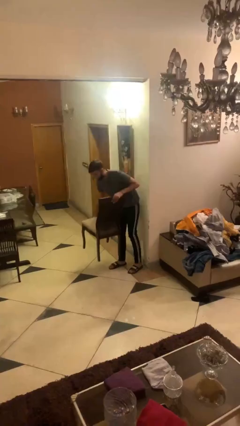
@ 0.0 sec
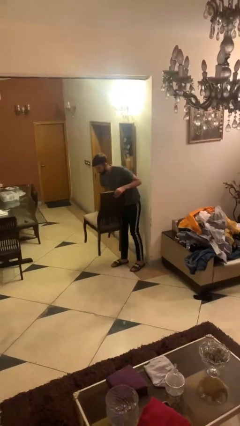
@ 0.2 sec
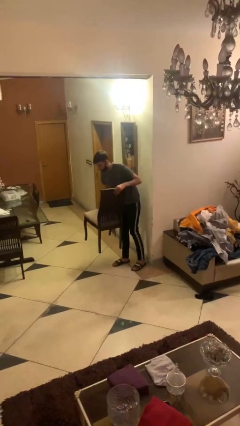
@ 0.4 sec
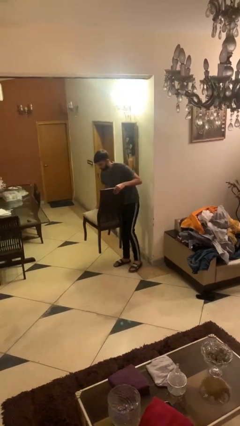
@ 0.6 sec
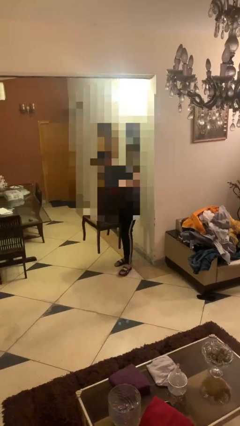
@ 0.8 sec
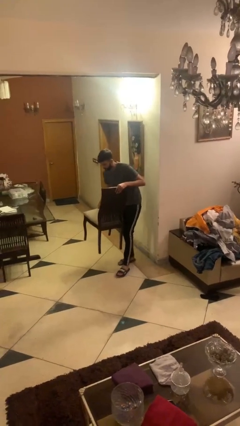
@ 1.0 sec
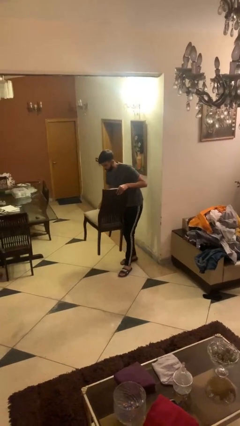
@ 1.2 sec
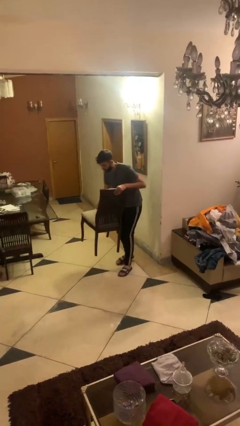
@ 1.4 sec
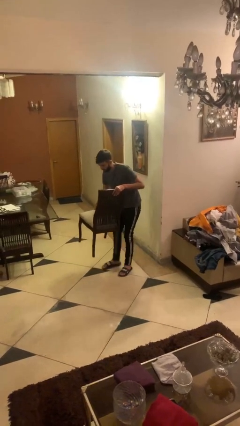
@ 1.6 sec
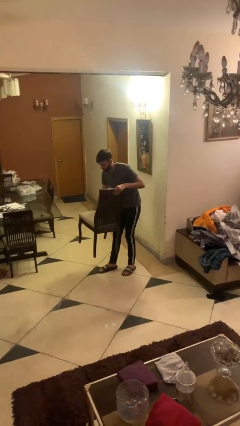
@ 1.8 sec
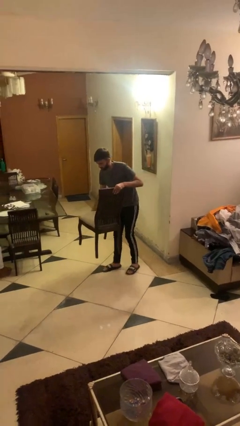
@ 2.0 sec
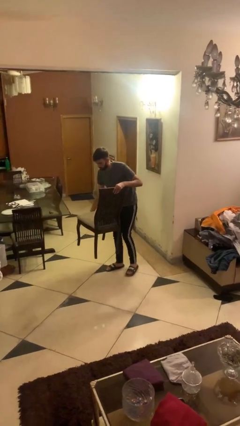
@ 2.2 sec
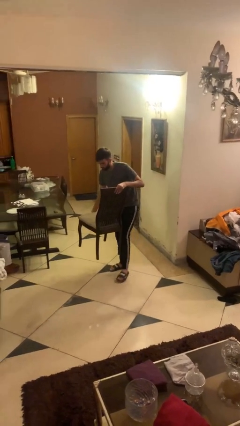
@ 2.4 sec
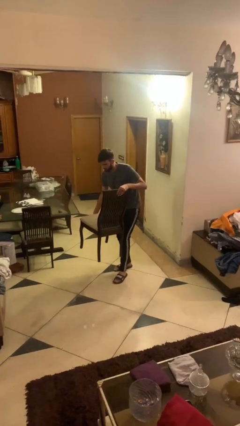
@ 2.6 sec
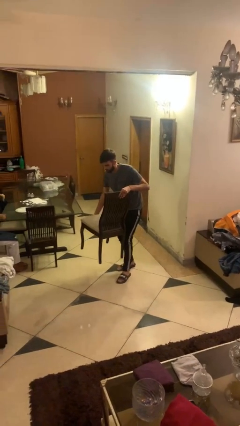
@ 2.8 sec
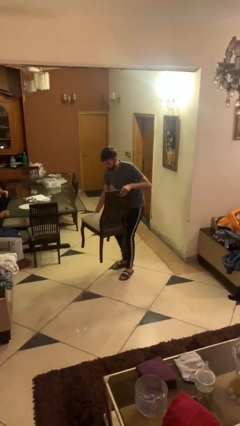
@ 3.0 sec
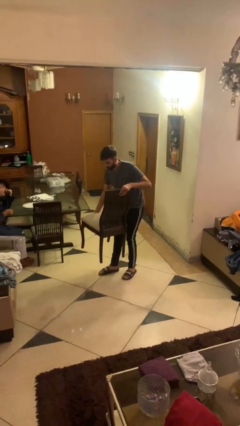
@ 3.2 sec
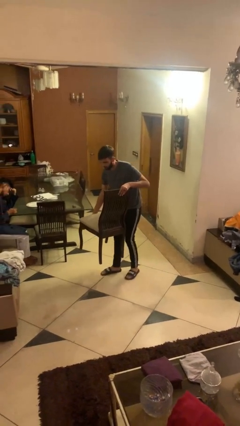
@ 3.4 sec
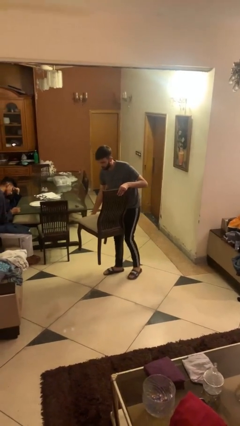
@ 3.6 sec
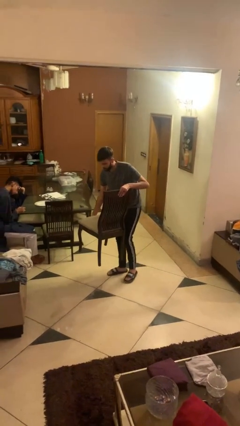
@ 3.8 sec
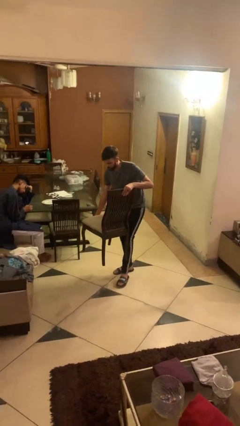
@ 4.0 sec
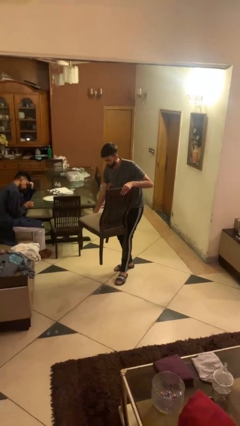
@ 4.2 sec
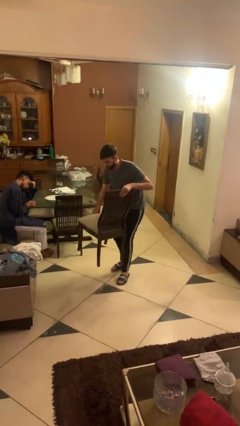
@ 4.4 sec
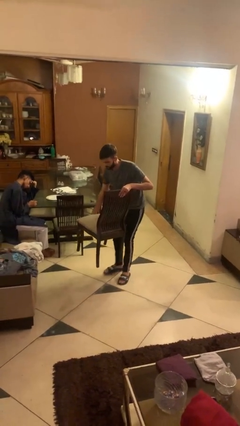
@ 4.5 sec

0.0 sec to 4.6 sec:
person carries heavy object

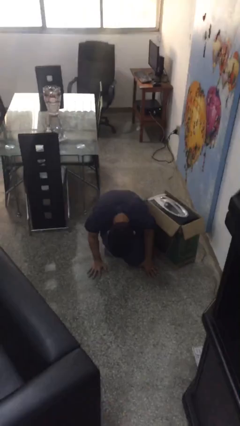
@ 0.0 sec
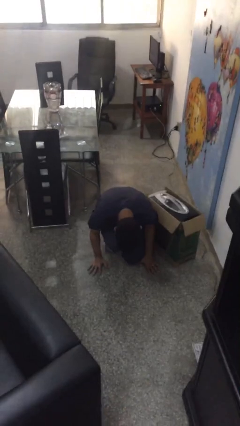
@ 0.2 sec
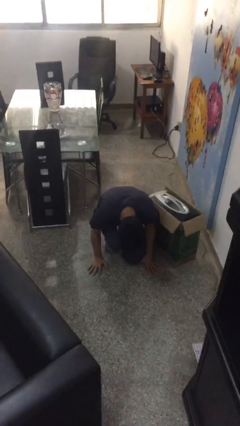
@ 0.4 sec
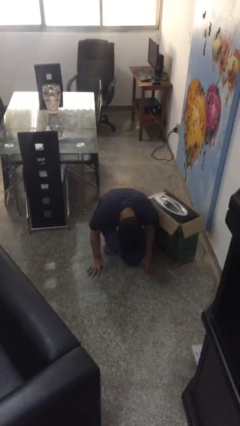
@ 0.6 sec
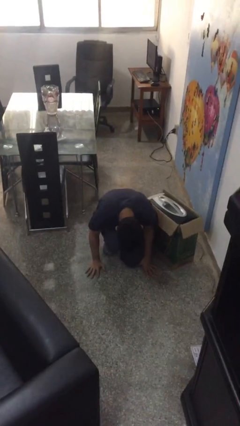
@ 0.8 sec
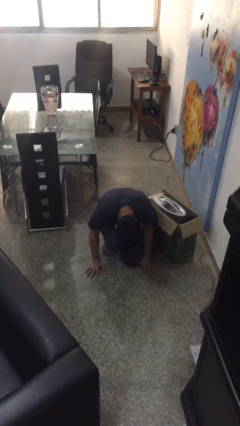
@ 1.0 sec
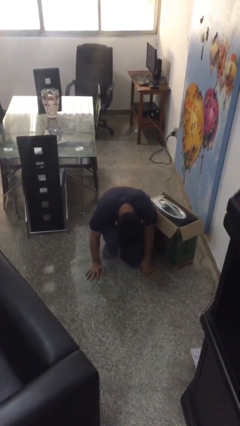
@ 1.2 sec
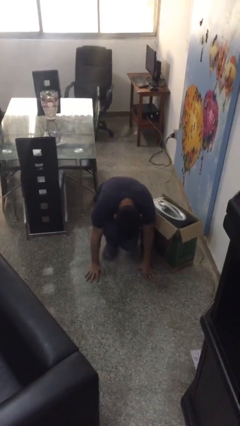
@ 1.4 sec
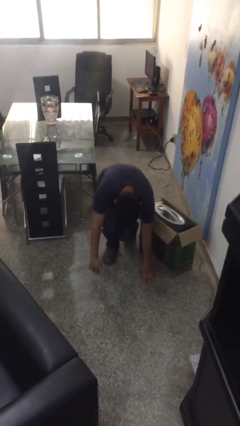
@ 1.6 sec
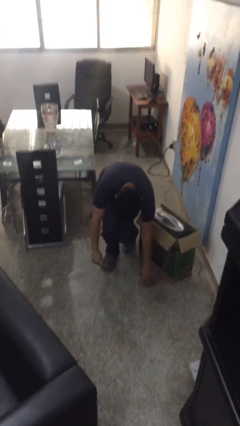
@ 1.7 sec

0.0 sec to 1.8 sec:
person lies down on floor

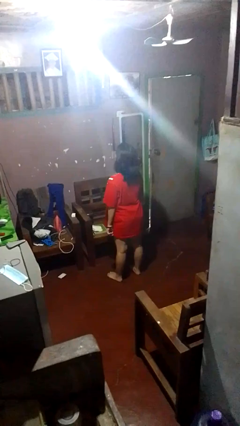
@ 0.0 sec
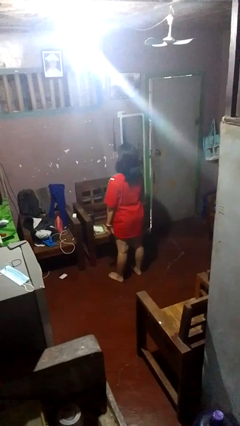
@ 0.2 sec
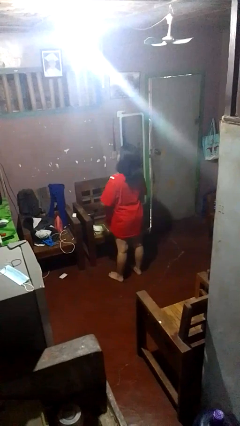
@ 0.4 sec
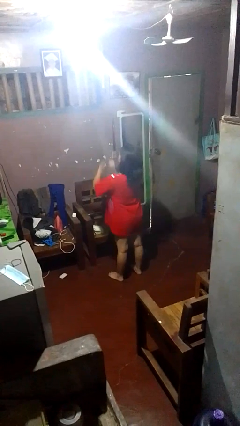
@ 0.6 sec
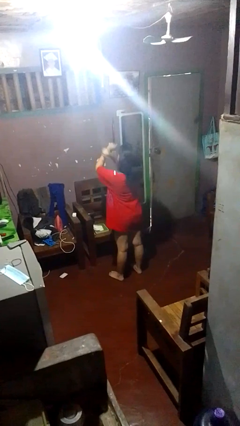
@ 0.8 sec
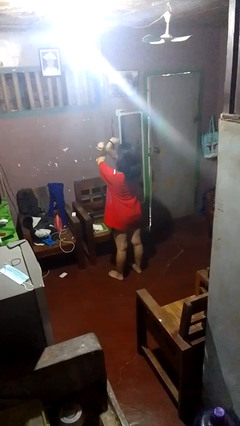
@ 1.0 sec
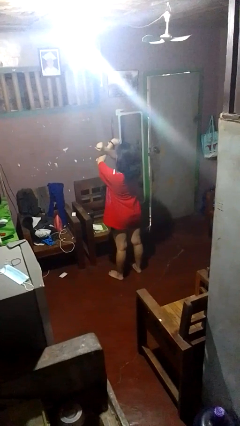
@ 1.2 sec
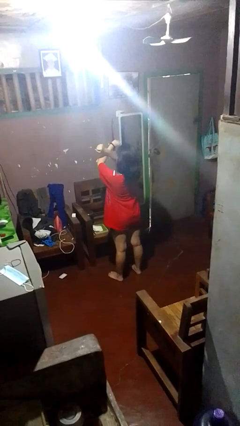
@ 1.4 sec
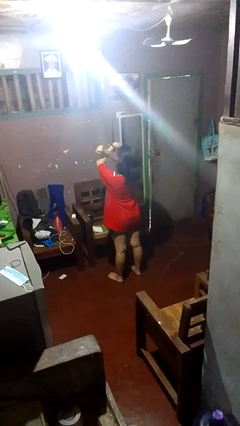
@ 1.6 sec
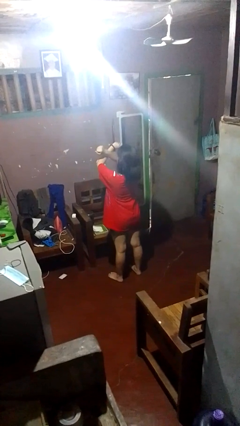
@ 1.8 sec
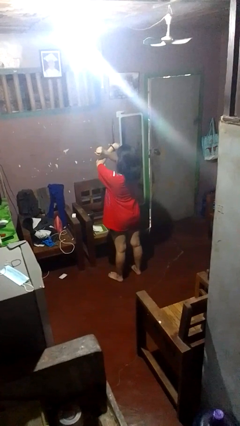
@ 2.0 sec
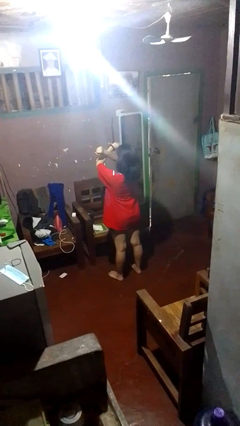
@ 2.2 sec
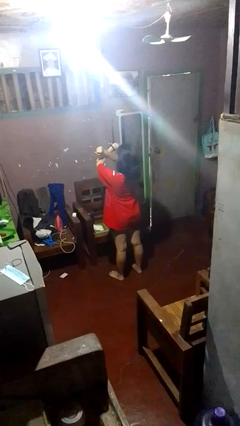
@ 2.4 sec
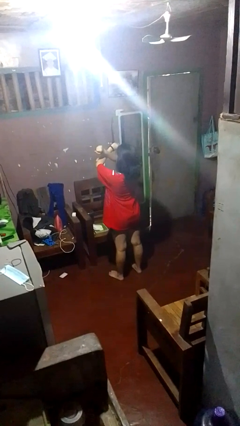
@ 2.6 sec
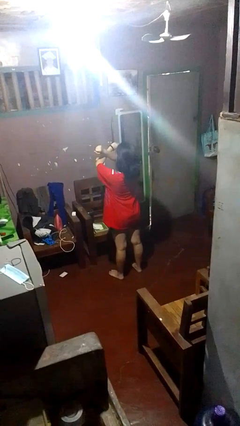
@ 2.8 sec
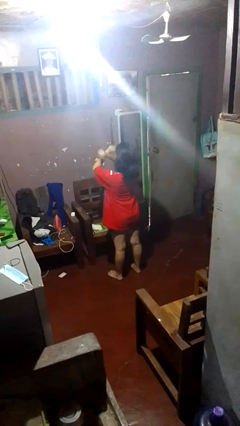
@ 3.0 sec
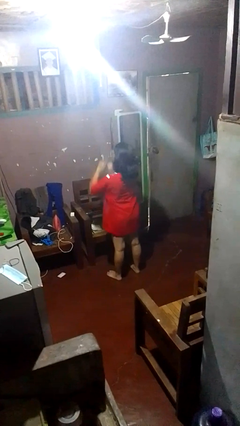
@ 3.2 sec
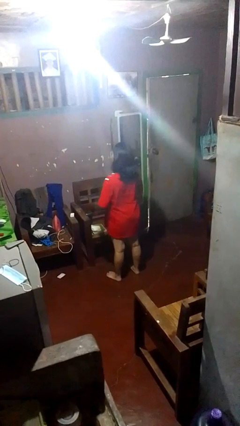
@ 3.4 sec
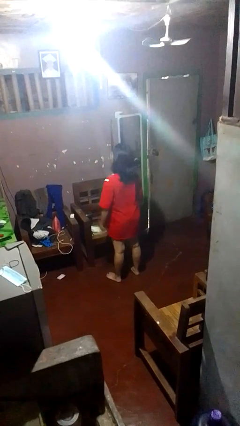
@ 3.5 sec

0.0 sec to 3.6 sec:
person gestures arms x

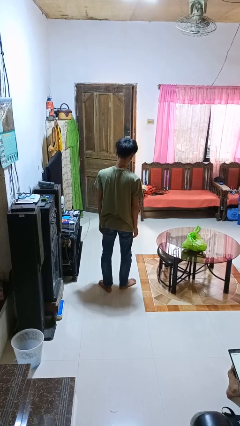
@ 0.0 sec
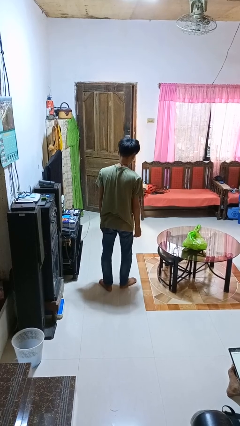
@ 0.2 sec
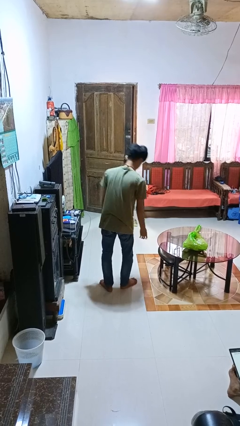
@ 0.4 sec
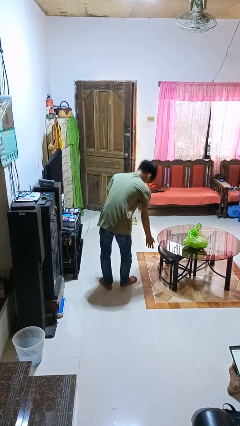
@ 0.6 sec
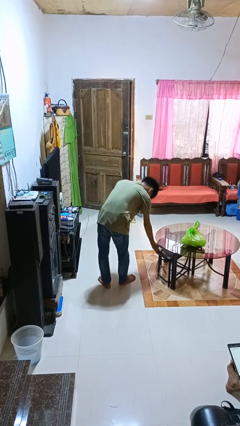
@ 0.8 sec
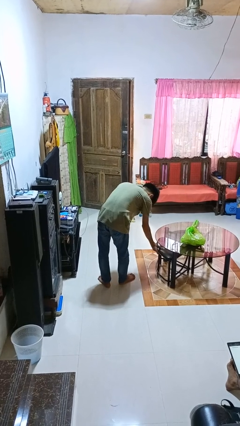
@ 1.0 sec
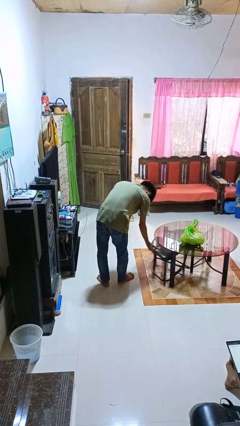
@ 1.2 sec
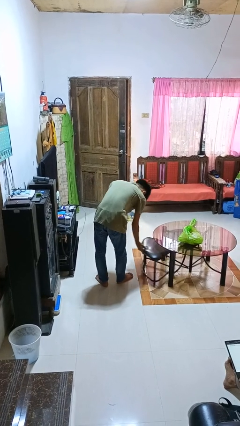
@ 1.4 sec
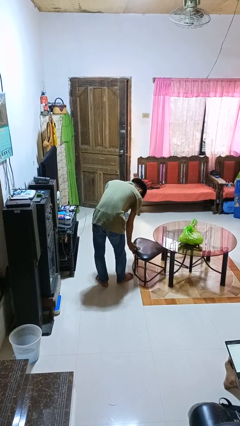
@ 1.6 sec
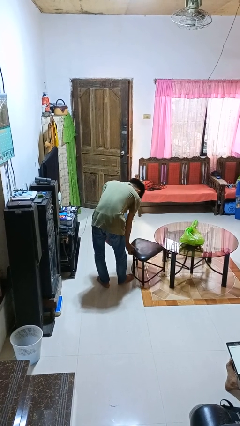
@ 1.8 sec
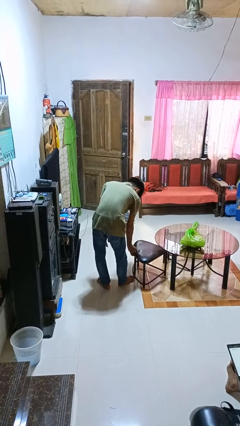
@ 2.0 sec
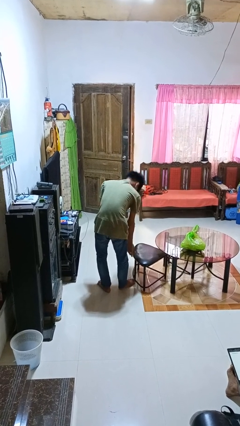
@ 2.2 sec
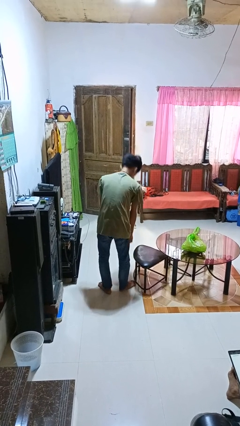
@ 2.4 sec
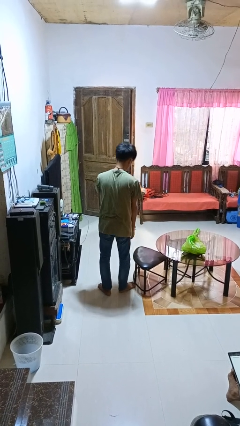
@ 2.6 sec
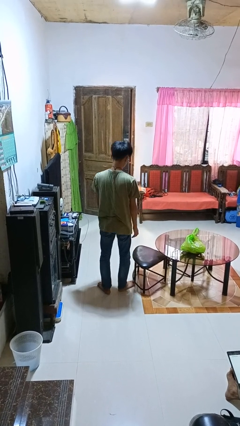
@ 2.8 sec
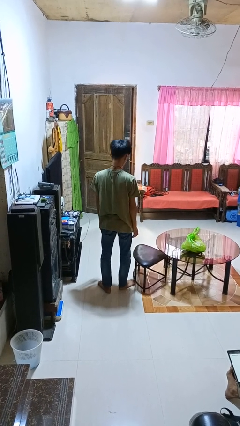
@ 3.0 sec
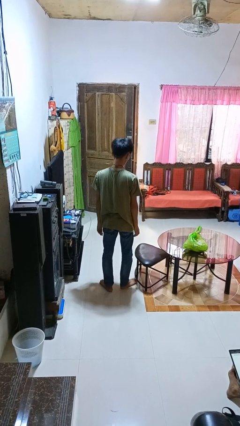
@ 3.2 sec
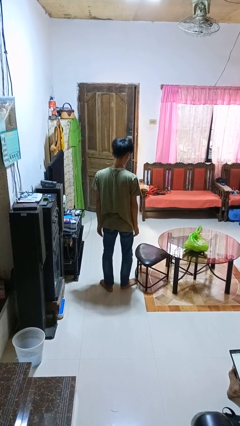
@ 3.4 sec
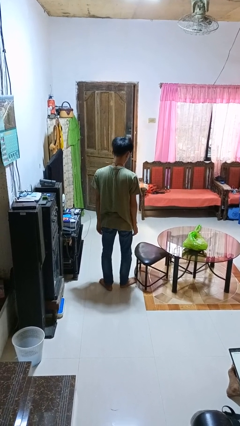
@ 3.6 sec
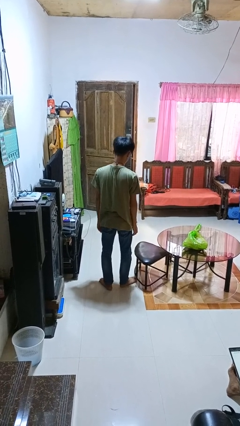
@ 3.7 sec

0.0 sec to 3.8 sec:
person pulls out chair

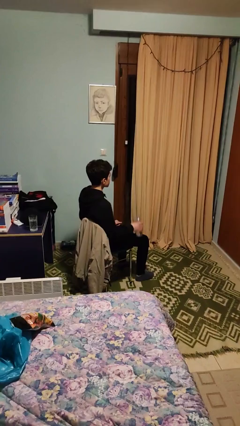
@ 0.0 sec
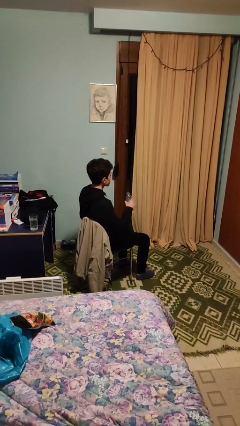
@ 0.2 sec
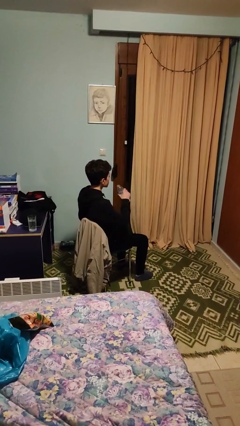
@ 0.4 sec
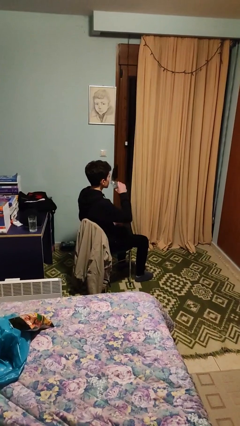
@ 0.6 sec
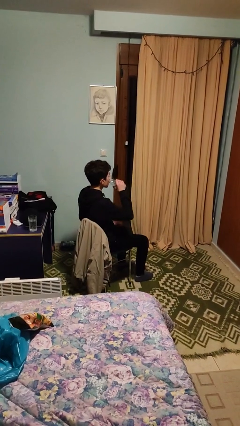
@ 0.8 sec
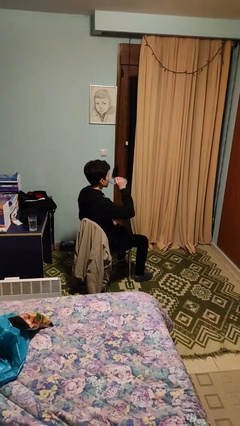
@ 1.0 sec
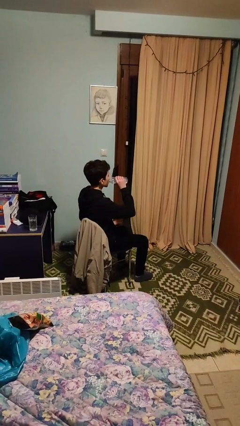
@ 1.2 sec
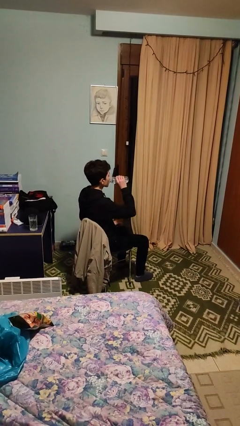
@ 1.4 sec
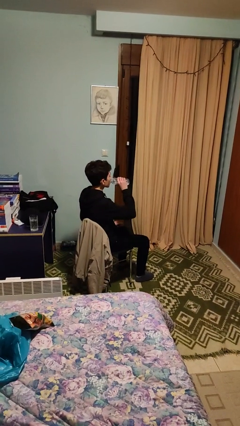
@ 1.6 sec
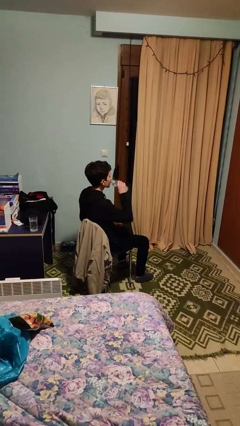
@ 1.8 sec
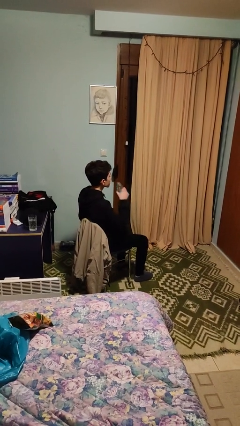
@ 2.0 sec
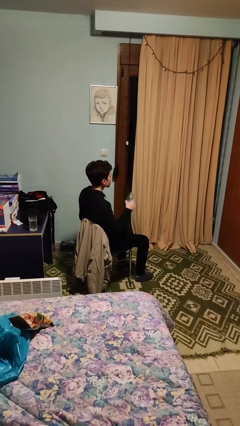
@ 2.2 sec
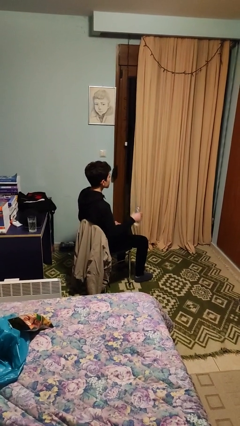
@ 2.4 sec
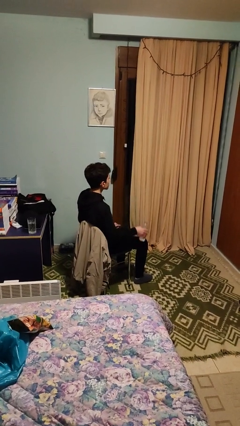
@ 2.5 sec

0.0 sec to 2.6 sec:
person drinks from bottle

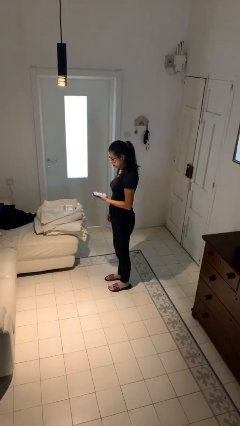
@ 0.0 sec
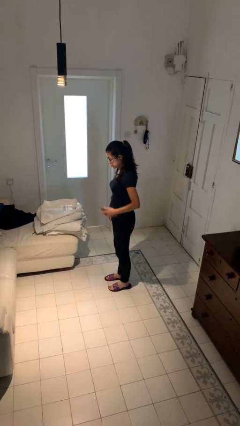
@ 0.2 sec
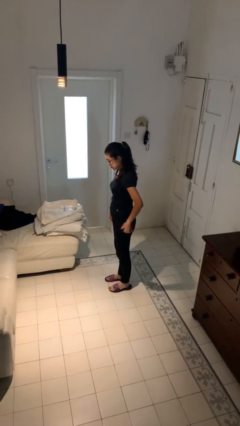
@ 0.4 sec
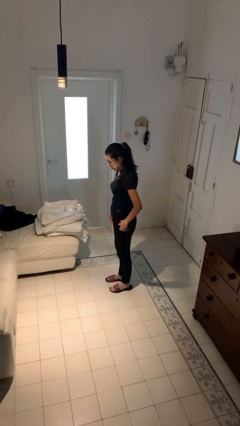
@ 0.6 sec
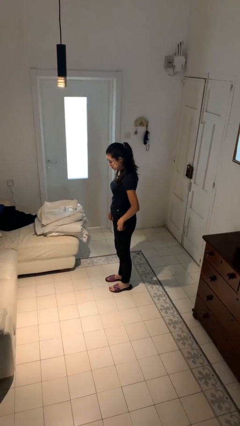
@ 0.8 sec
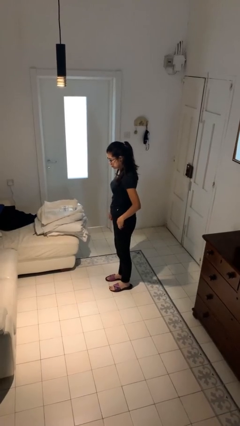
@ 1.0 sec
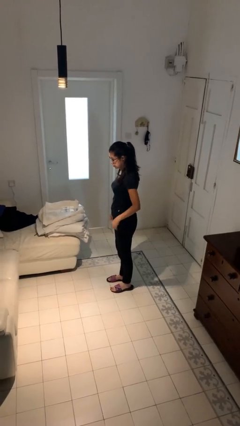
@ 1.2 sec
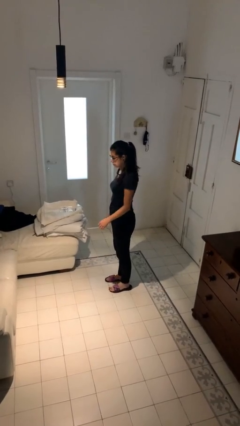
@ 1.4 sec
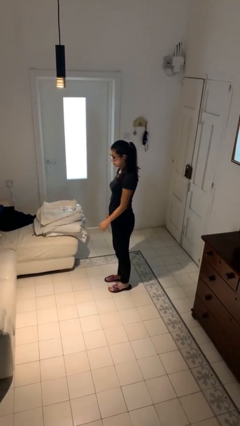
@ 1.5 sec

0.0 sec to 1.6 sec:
person puts phone into pocket
